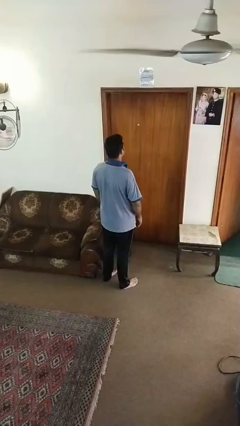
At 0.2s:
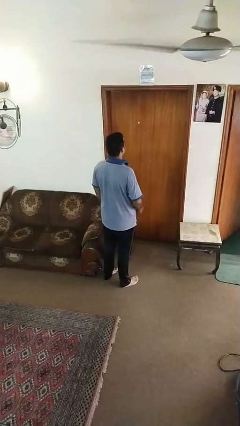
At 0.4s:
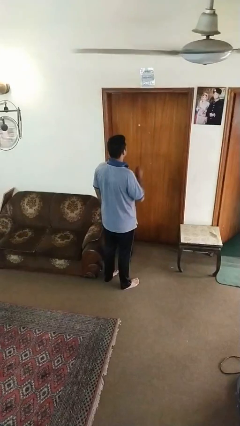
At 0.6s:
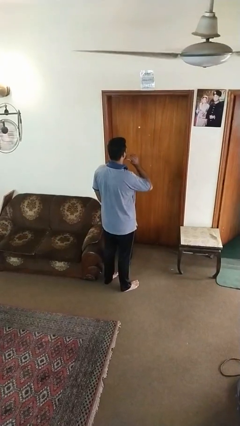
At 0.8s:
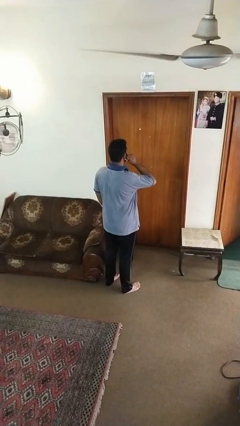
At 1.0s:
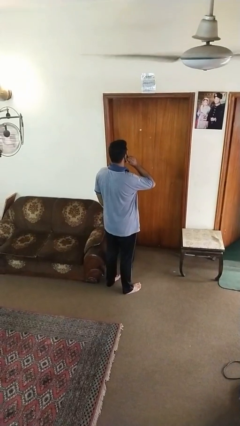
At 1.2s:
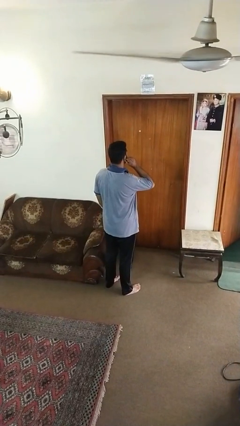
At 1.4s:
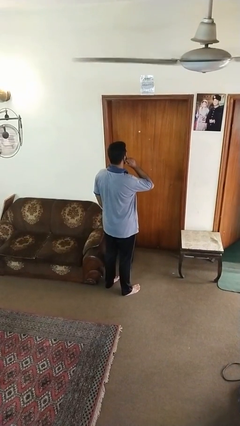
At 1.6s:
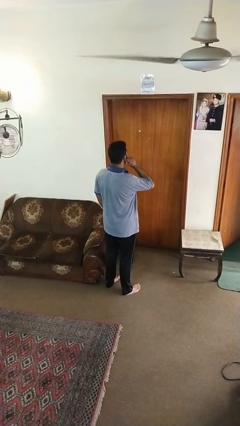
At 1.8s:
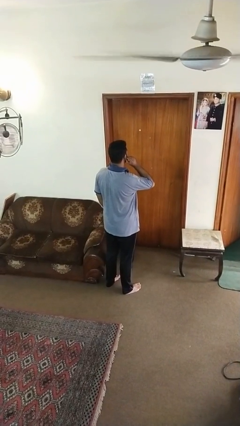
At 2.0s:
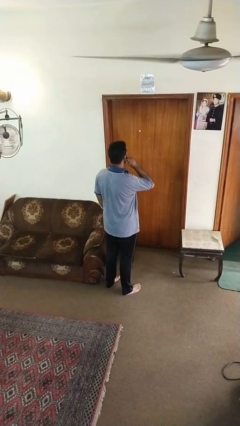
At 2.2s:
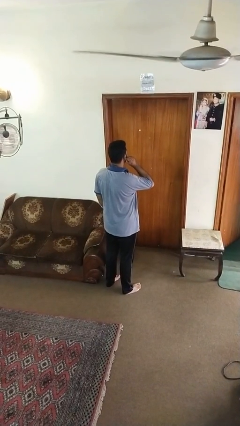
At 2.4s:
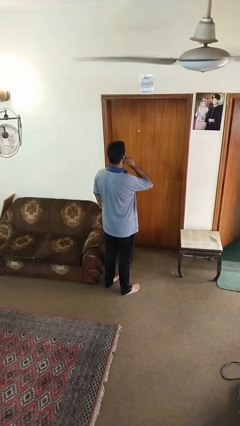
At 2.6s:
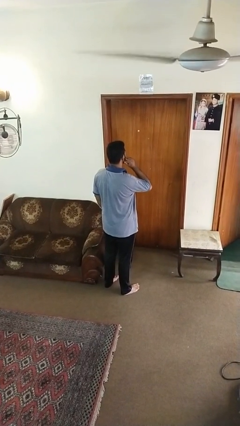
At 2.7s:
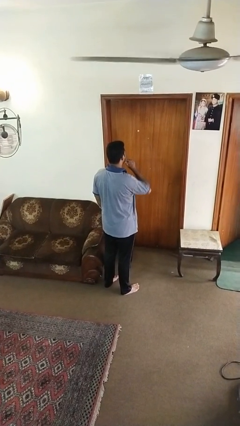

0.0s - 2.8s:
person touches earlobe

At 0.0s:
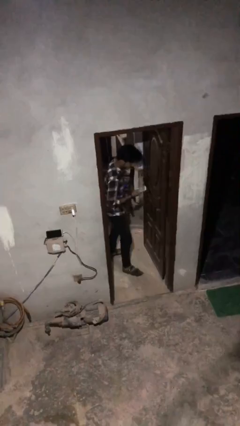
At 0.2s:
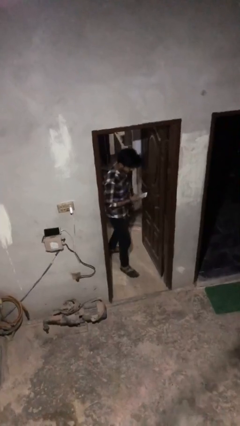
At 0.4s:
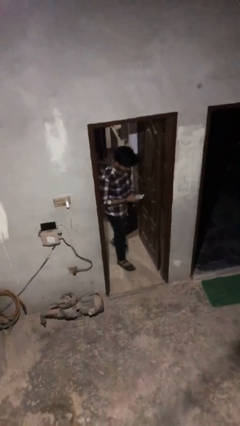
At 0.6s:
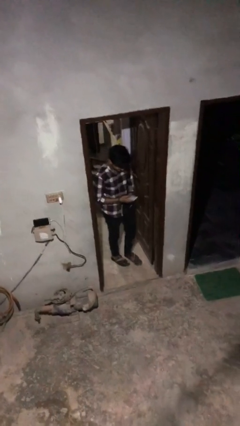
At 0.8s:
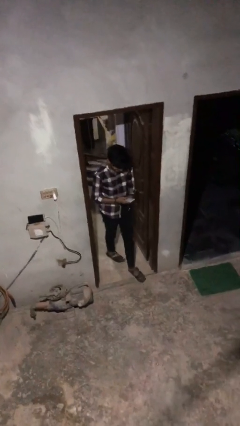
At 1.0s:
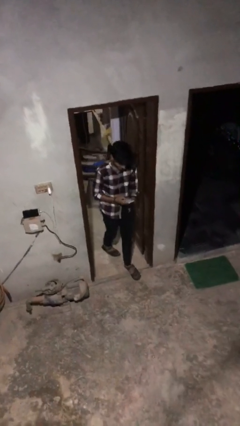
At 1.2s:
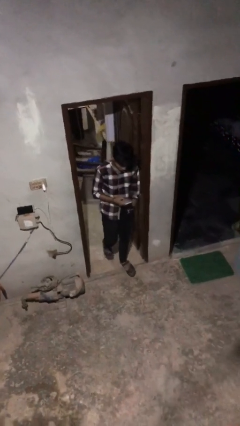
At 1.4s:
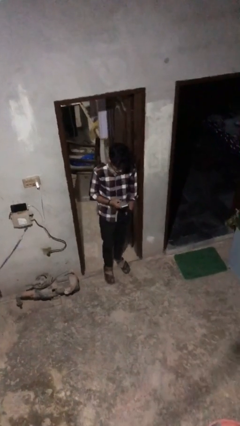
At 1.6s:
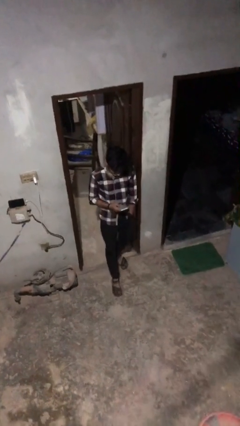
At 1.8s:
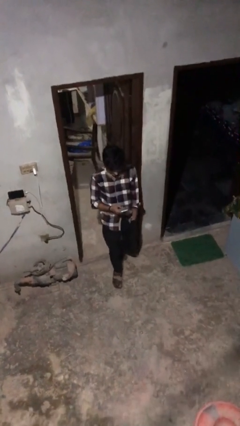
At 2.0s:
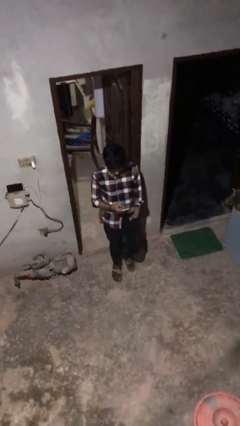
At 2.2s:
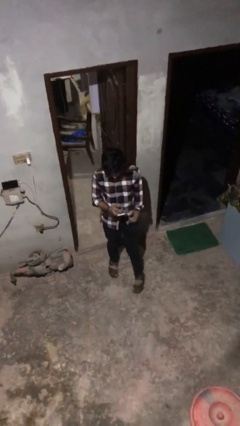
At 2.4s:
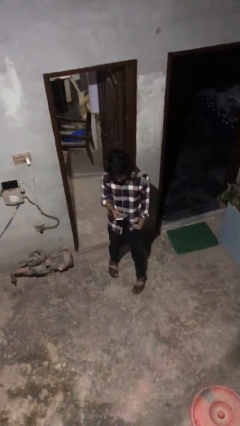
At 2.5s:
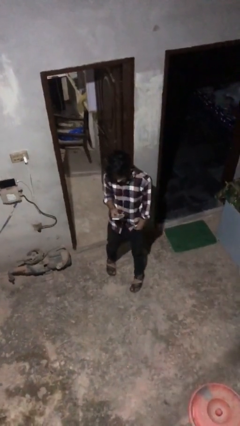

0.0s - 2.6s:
person enters scene through structure

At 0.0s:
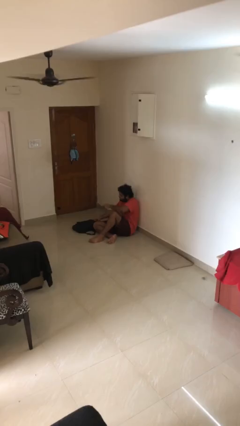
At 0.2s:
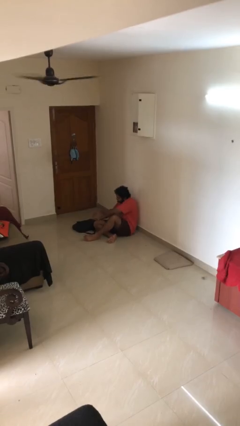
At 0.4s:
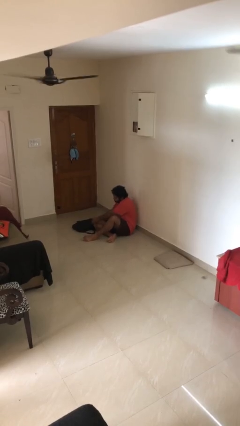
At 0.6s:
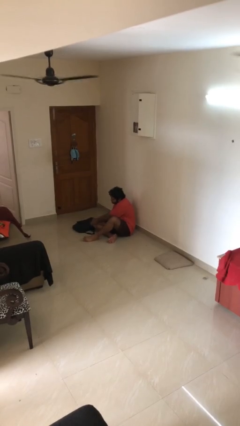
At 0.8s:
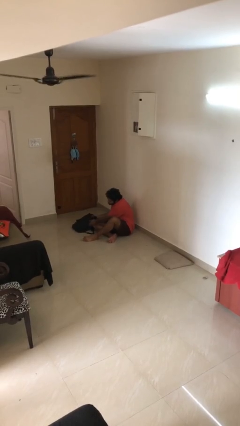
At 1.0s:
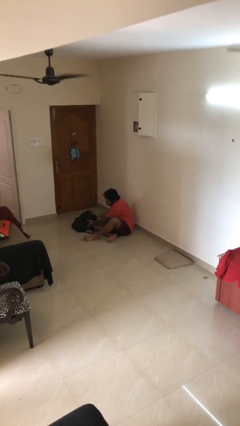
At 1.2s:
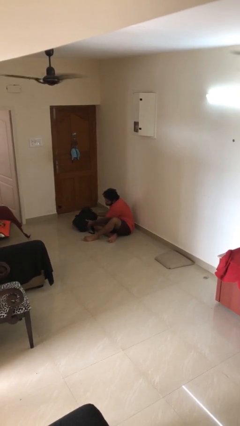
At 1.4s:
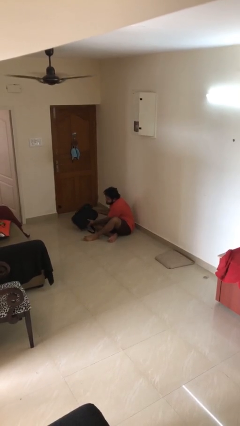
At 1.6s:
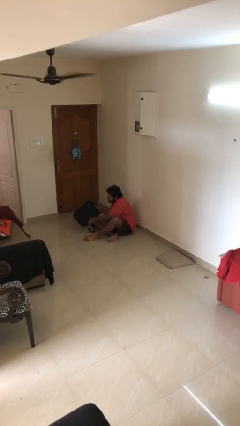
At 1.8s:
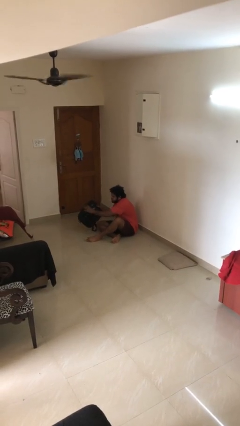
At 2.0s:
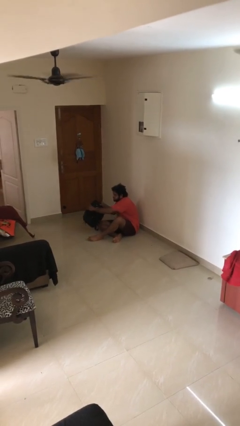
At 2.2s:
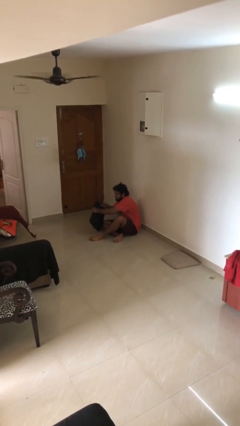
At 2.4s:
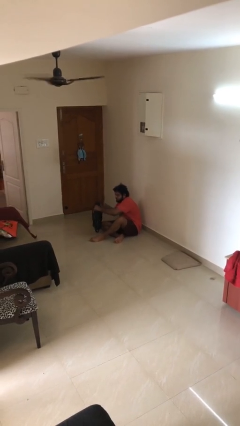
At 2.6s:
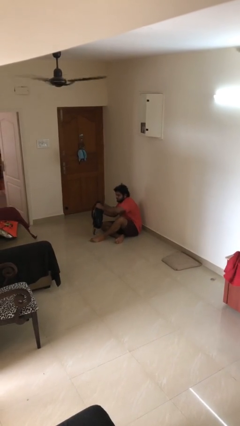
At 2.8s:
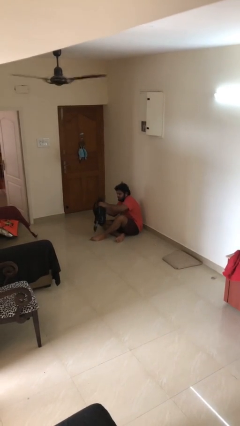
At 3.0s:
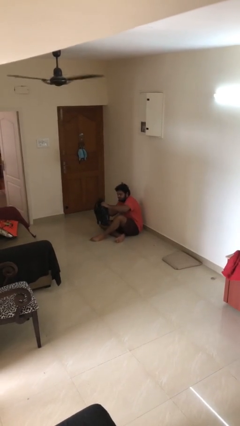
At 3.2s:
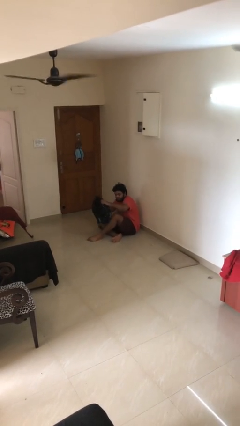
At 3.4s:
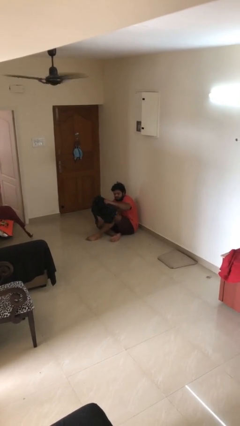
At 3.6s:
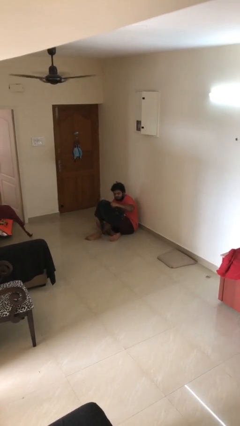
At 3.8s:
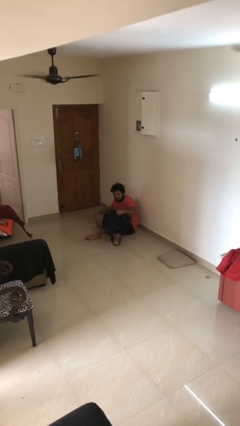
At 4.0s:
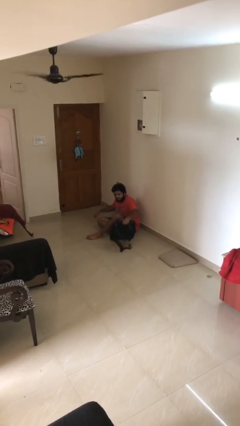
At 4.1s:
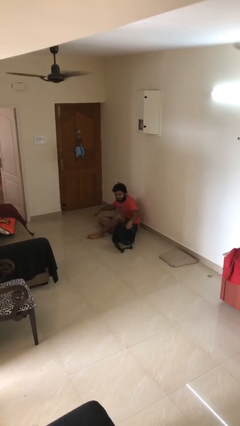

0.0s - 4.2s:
person picks up object from floor

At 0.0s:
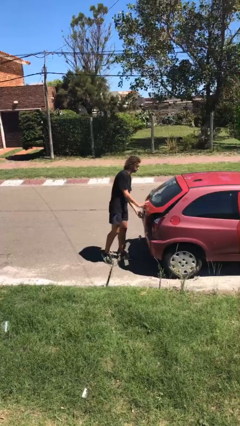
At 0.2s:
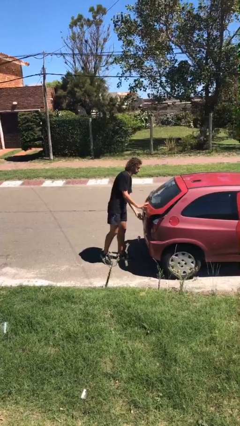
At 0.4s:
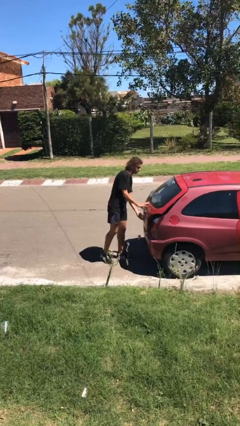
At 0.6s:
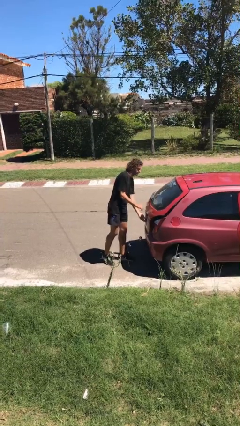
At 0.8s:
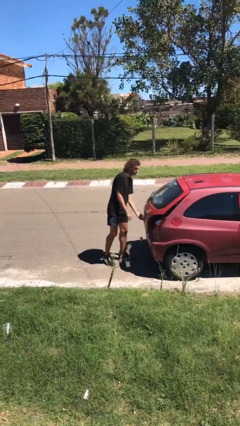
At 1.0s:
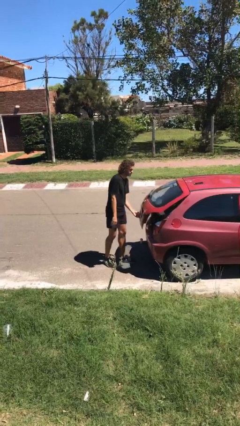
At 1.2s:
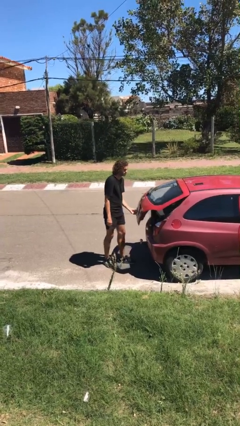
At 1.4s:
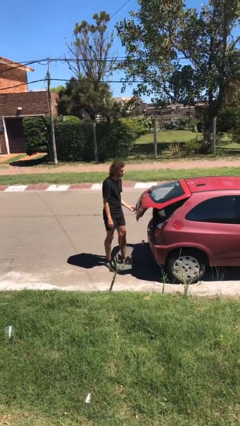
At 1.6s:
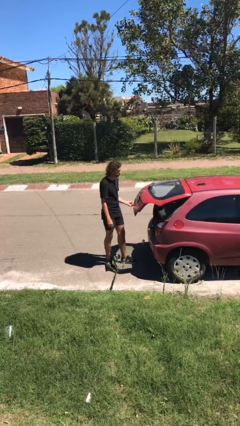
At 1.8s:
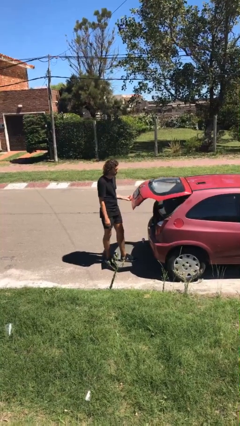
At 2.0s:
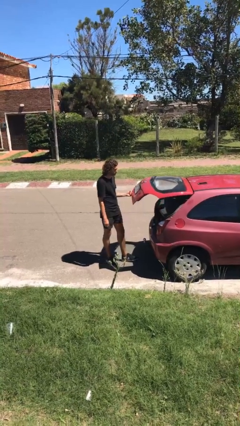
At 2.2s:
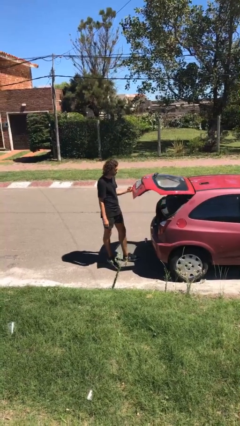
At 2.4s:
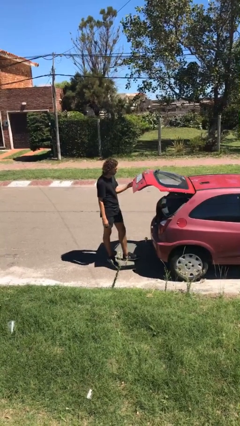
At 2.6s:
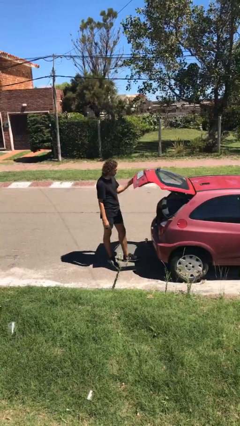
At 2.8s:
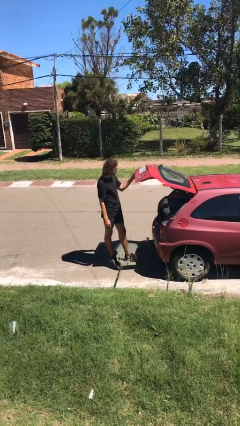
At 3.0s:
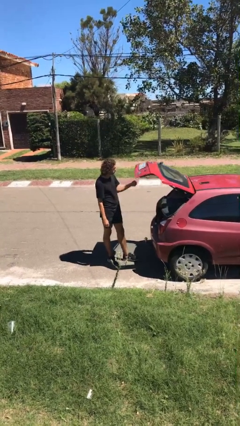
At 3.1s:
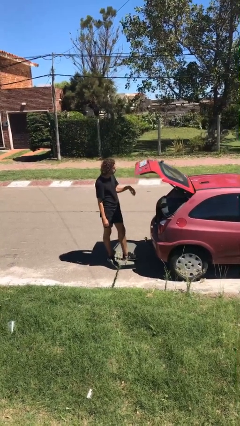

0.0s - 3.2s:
person opens car trunk

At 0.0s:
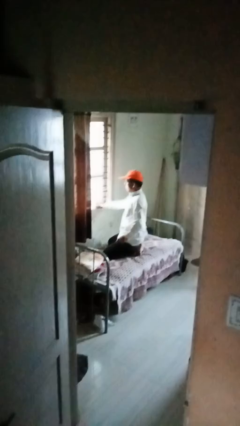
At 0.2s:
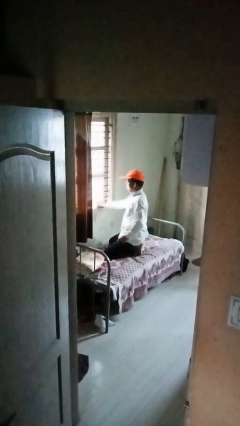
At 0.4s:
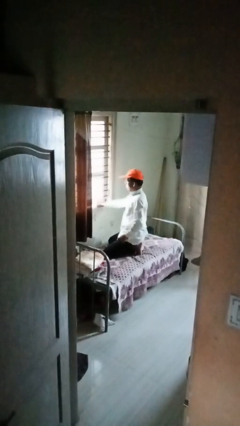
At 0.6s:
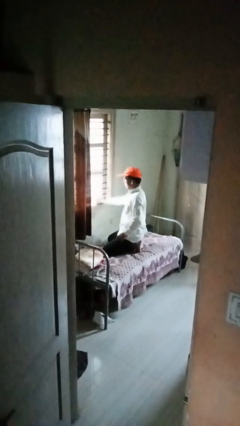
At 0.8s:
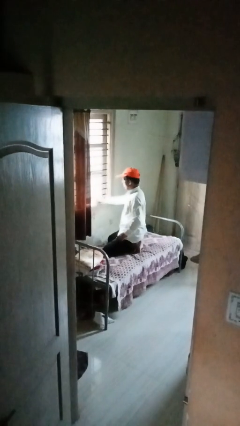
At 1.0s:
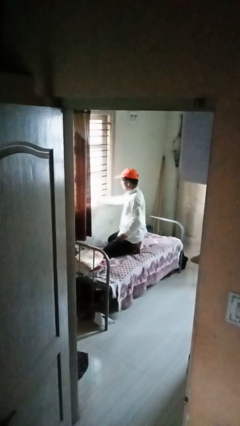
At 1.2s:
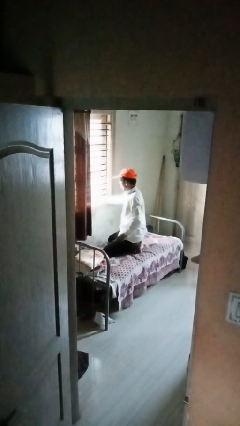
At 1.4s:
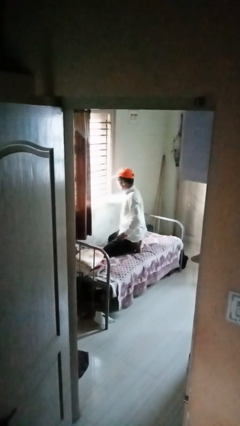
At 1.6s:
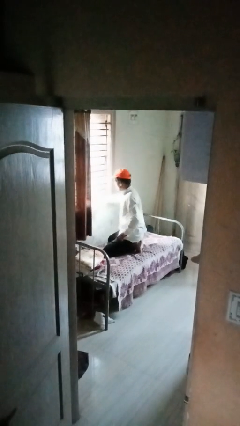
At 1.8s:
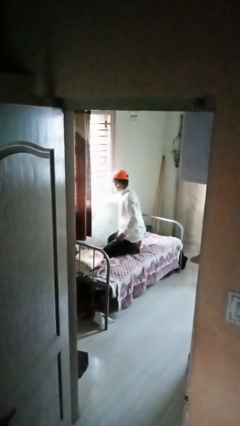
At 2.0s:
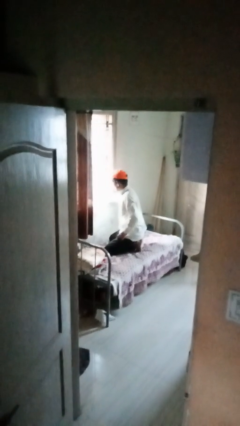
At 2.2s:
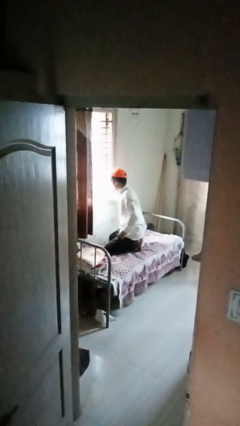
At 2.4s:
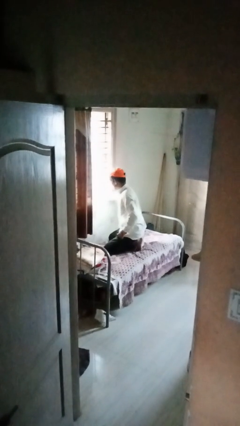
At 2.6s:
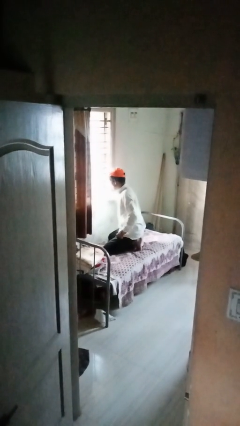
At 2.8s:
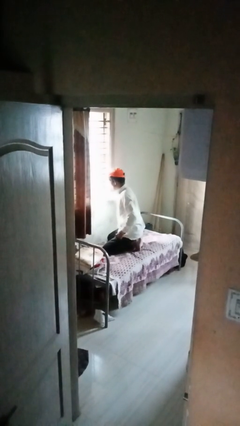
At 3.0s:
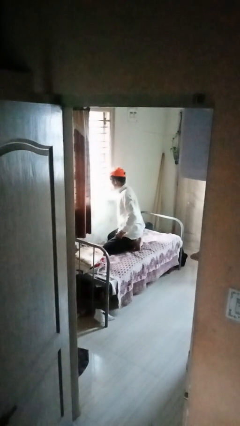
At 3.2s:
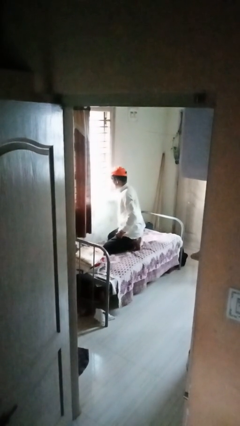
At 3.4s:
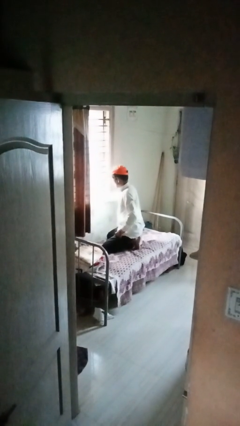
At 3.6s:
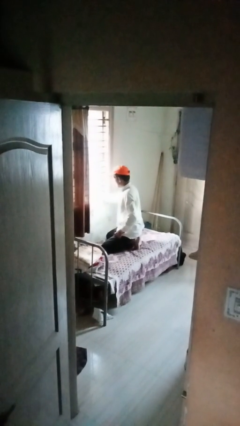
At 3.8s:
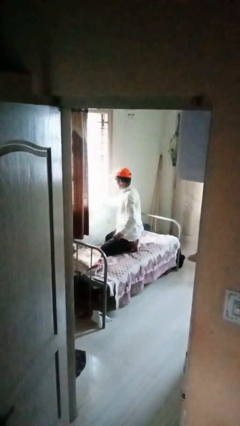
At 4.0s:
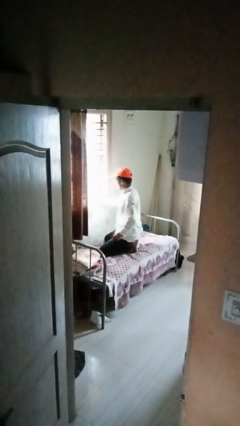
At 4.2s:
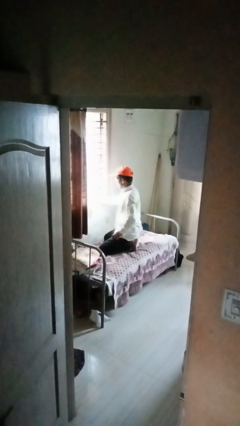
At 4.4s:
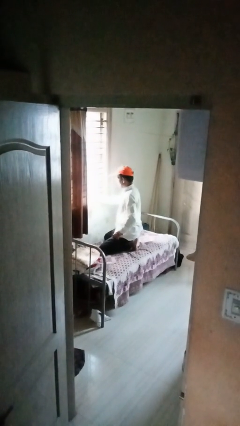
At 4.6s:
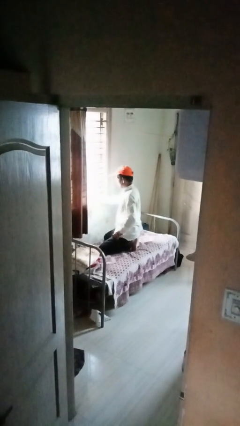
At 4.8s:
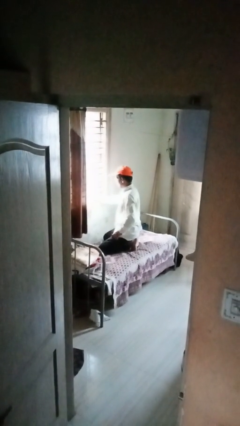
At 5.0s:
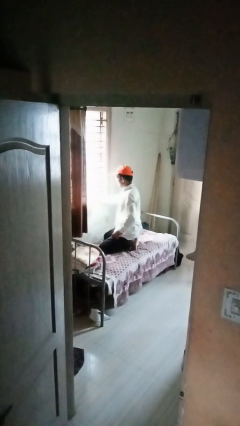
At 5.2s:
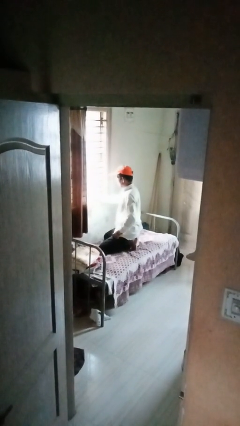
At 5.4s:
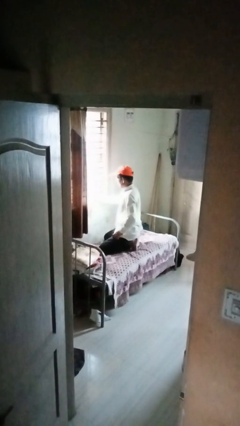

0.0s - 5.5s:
person opens home window
